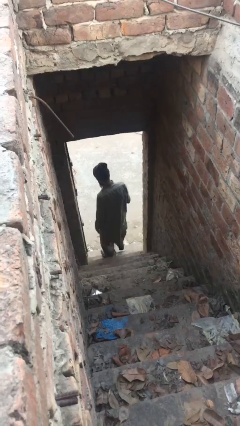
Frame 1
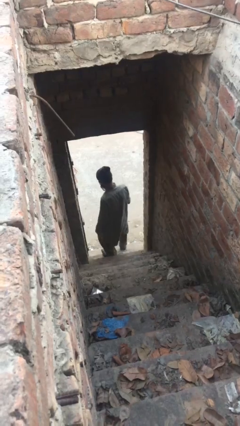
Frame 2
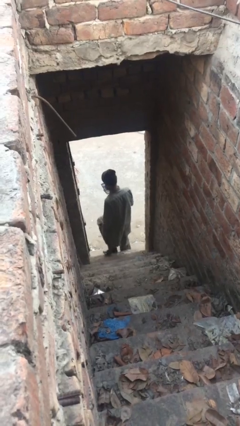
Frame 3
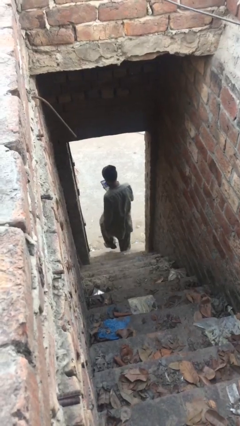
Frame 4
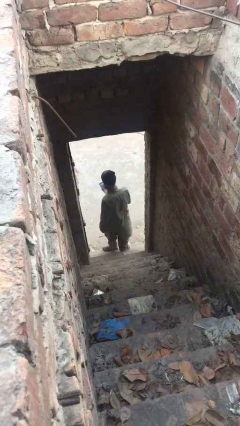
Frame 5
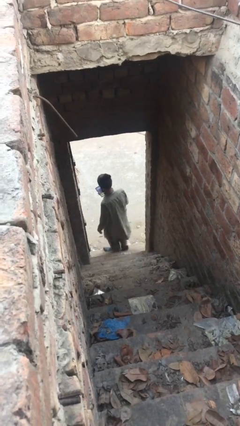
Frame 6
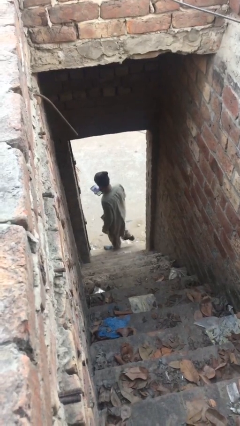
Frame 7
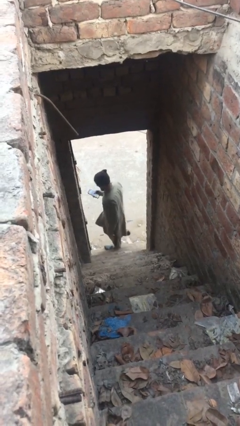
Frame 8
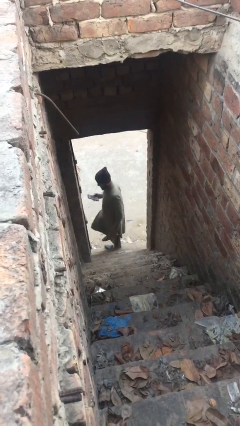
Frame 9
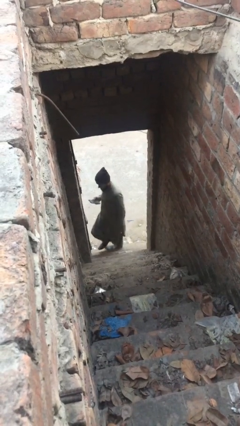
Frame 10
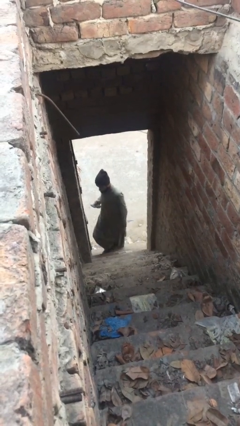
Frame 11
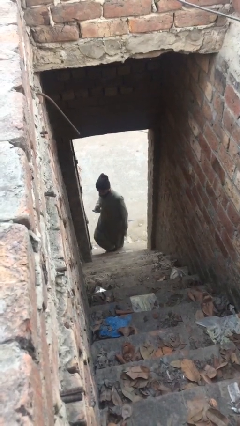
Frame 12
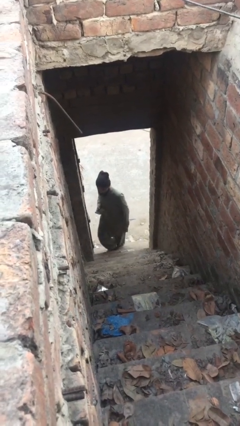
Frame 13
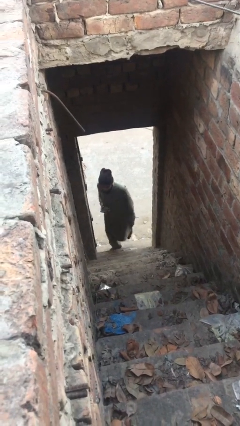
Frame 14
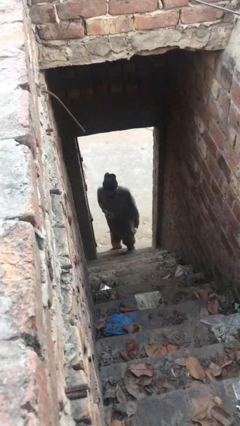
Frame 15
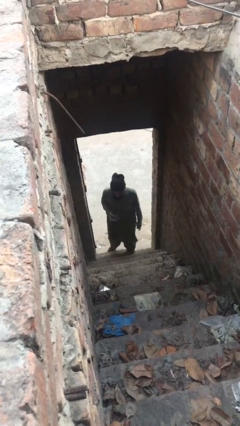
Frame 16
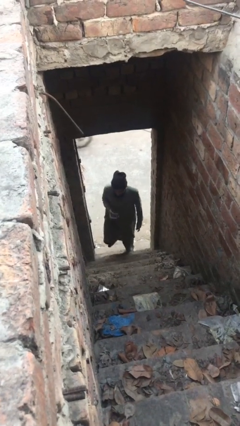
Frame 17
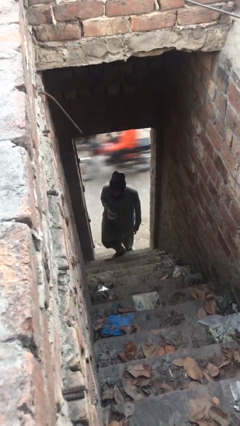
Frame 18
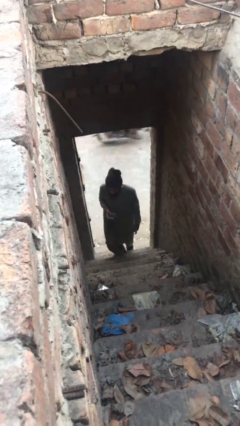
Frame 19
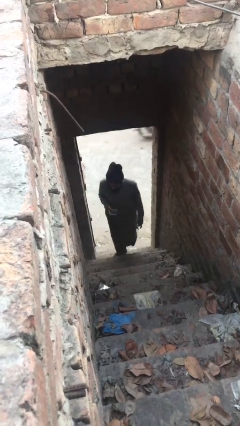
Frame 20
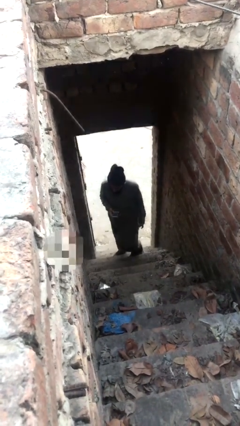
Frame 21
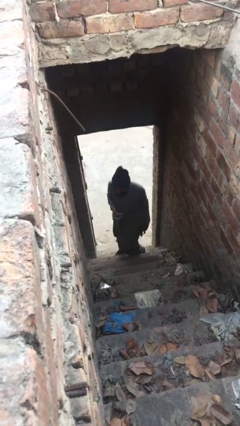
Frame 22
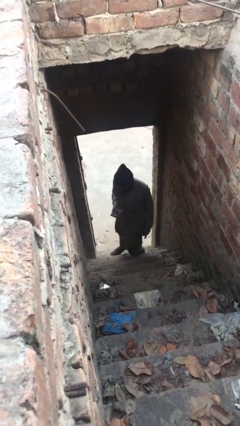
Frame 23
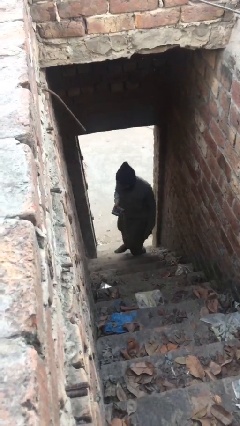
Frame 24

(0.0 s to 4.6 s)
person enters scene through structure

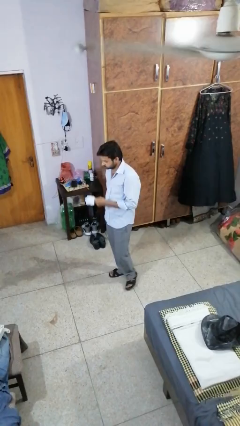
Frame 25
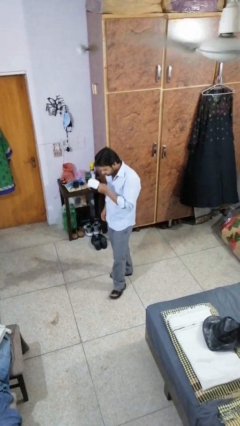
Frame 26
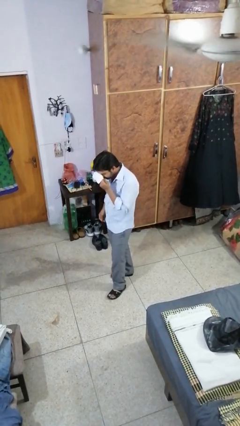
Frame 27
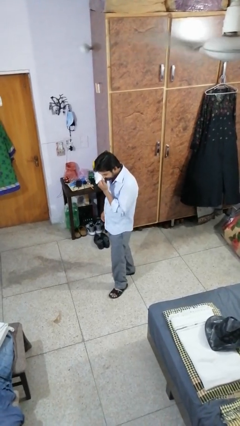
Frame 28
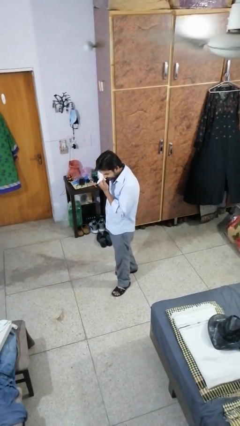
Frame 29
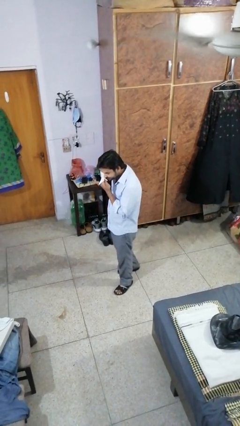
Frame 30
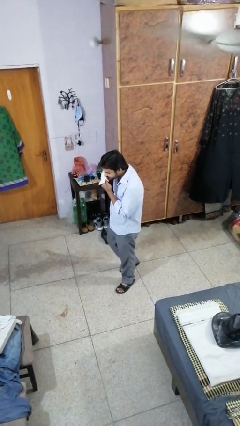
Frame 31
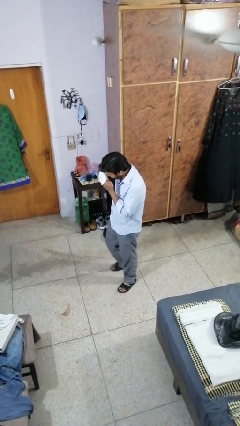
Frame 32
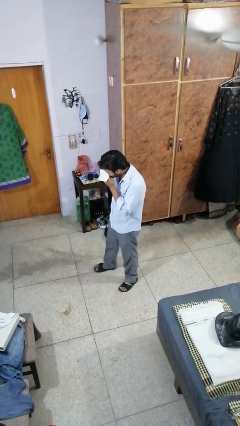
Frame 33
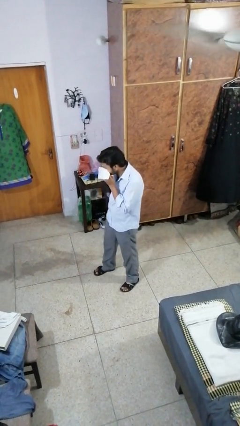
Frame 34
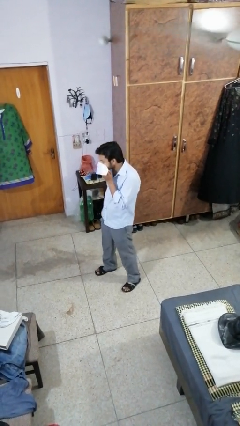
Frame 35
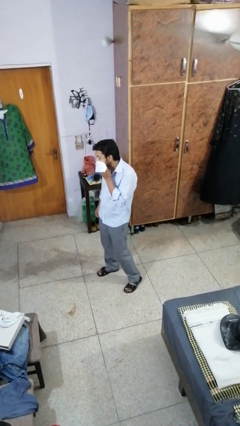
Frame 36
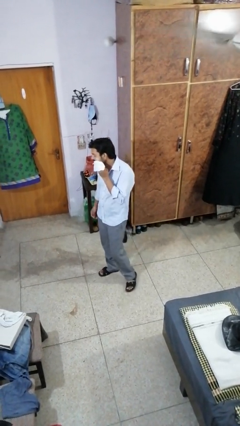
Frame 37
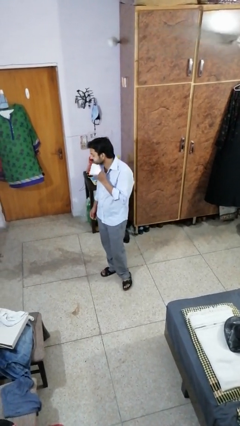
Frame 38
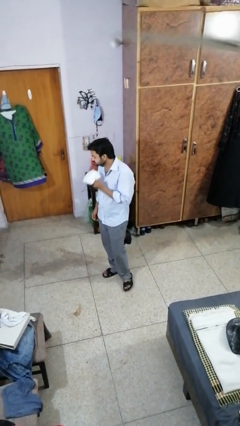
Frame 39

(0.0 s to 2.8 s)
person wipes mouth with napkin

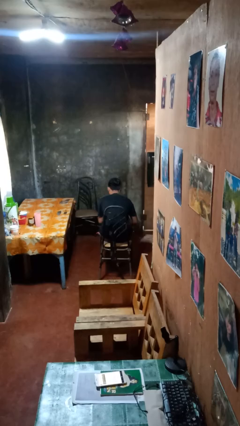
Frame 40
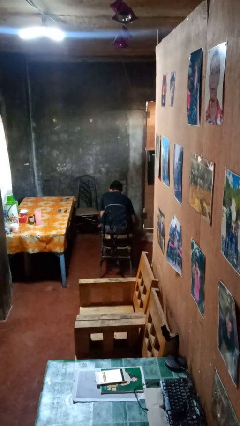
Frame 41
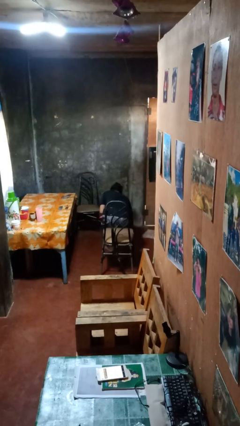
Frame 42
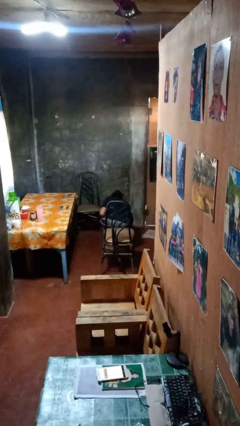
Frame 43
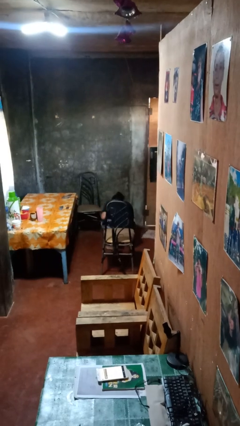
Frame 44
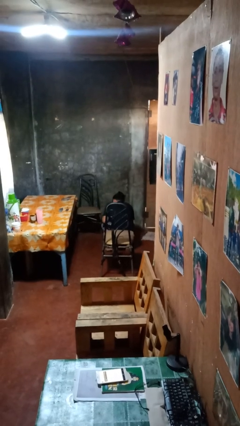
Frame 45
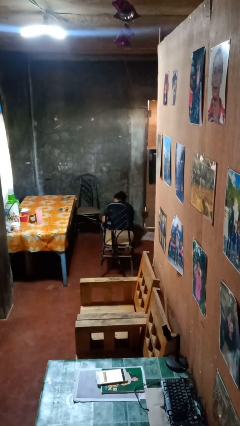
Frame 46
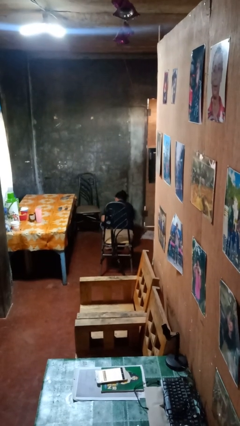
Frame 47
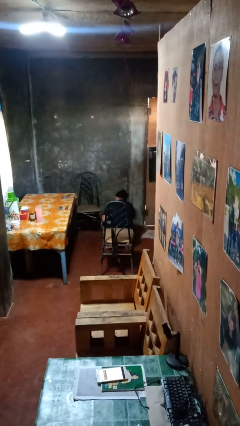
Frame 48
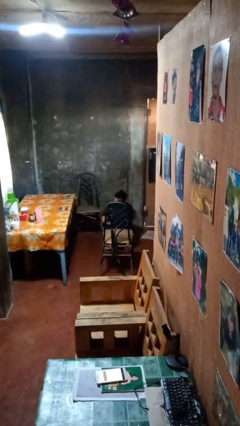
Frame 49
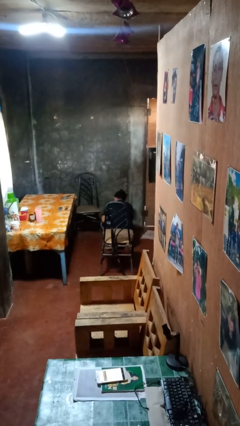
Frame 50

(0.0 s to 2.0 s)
person falls from chair

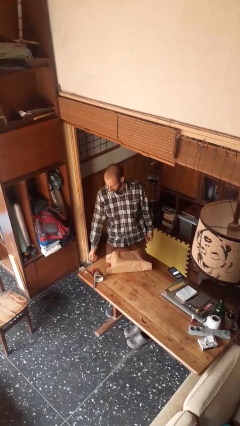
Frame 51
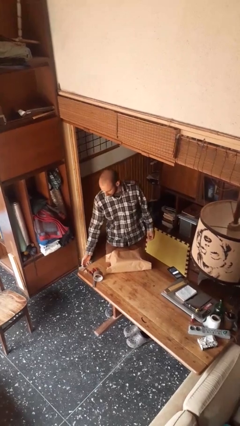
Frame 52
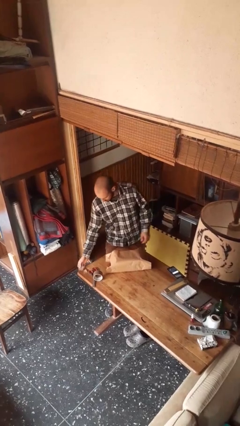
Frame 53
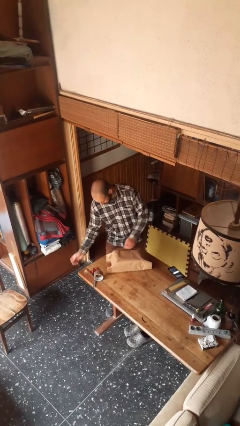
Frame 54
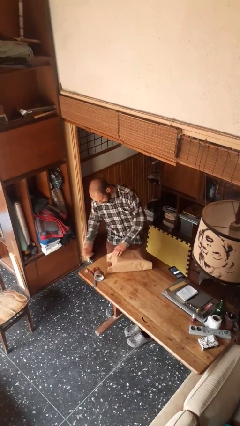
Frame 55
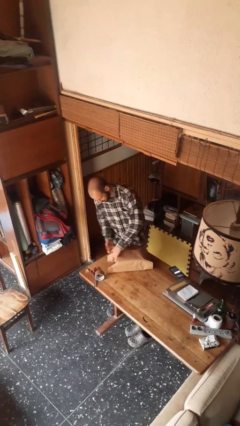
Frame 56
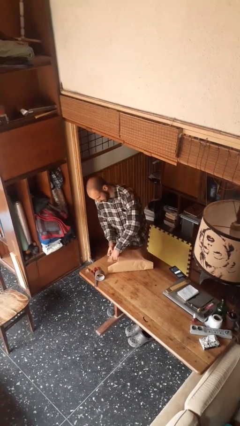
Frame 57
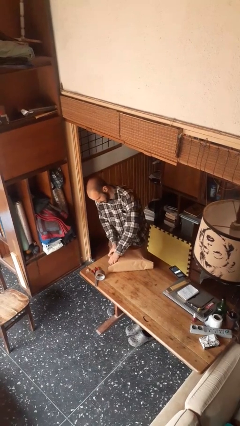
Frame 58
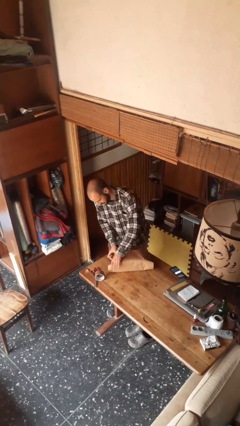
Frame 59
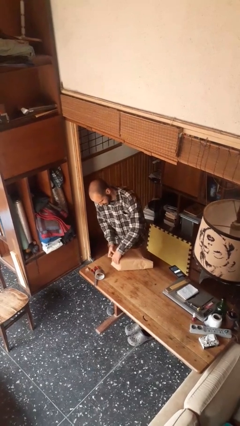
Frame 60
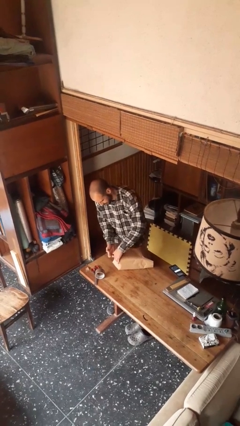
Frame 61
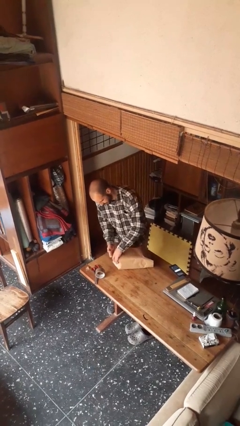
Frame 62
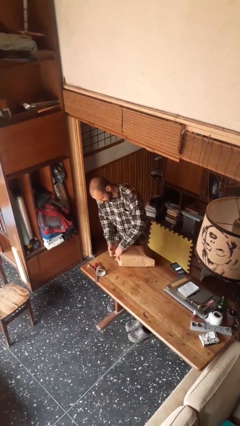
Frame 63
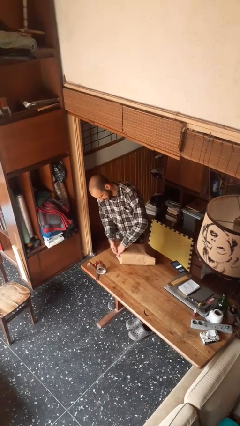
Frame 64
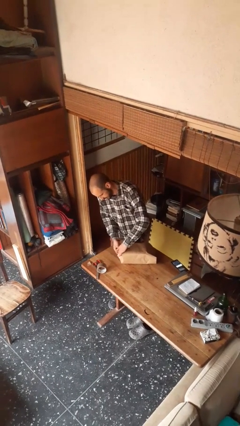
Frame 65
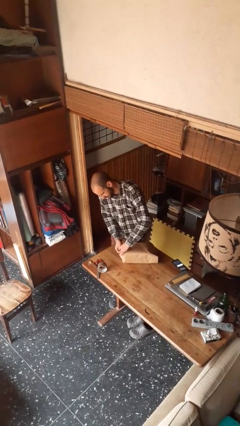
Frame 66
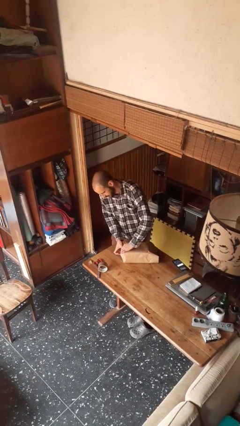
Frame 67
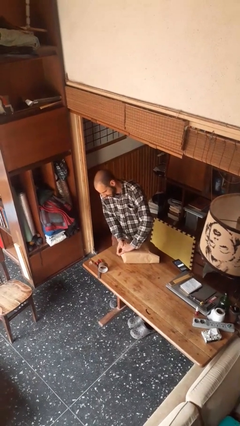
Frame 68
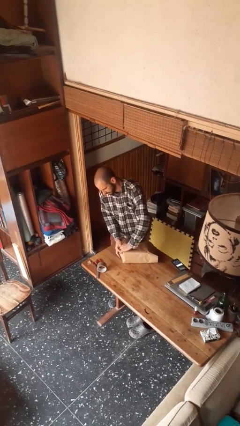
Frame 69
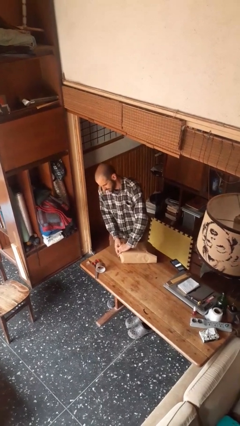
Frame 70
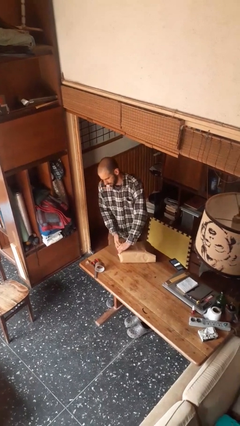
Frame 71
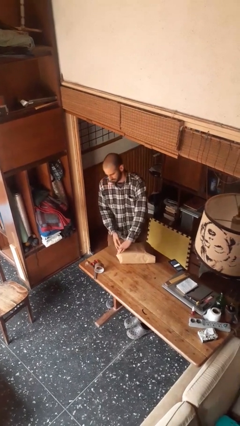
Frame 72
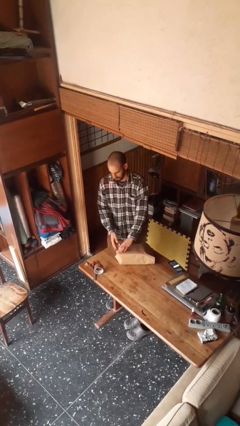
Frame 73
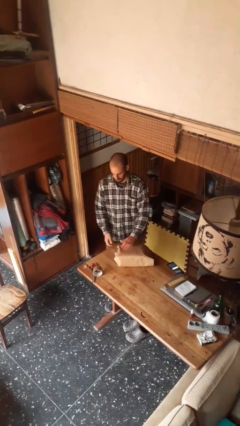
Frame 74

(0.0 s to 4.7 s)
person wraps box

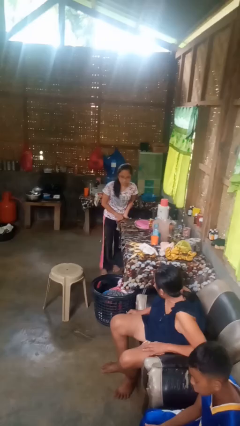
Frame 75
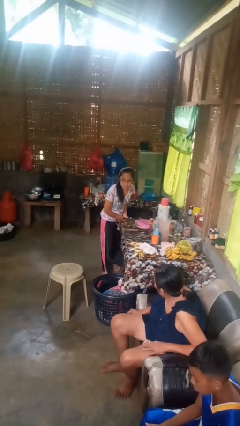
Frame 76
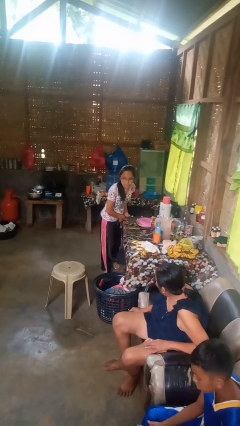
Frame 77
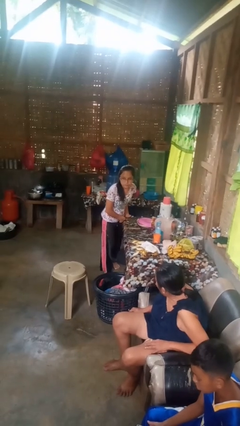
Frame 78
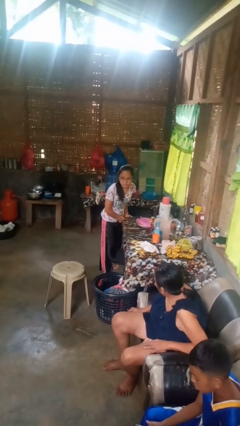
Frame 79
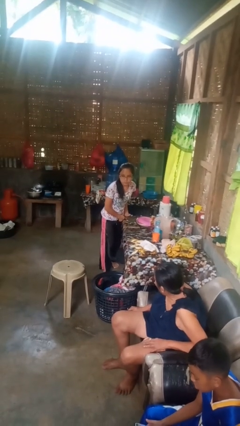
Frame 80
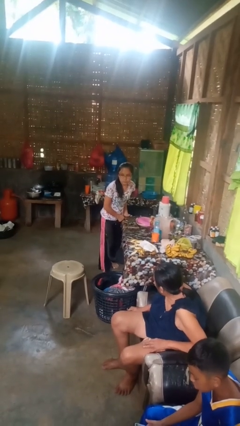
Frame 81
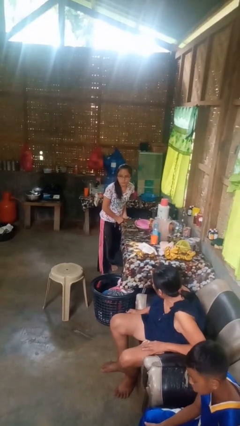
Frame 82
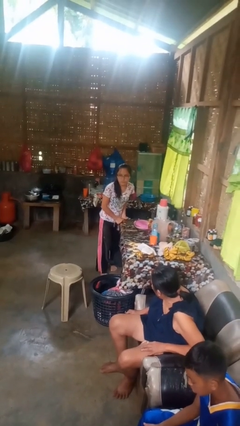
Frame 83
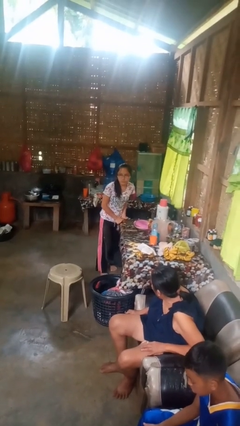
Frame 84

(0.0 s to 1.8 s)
person bumps into table

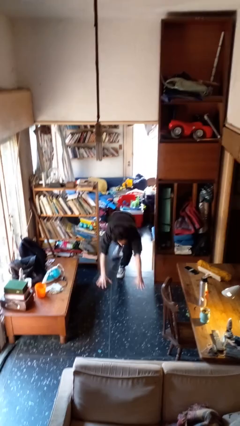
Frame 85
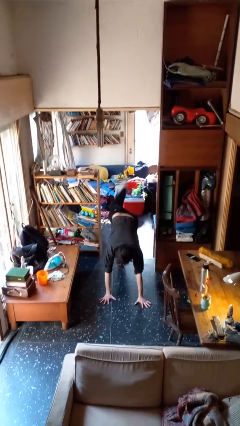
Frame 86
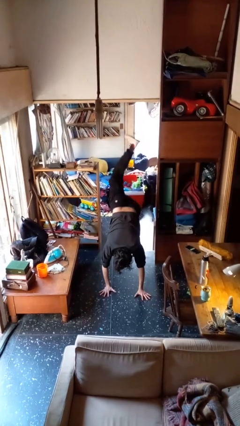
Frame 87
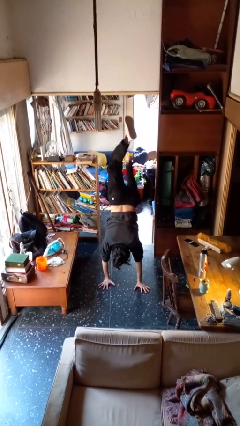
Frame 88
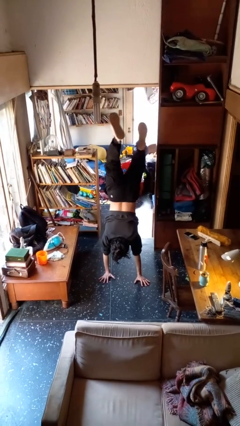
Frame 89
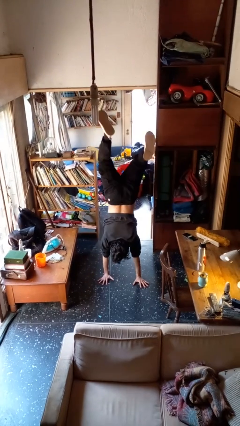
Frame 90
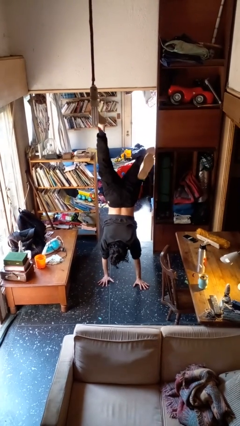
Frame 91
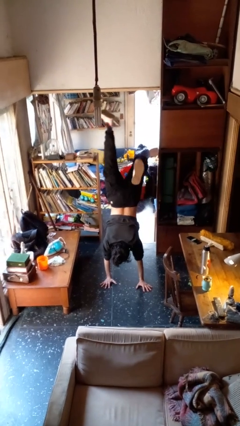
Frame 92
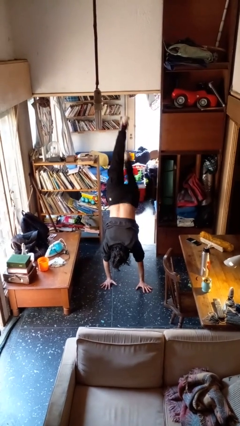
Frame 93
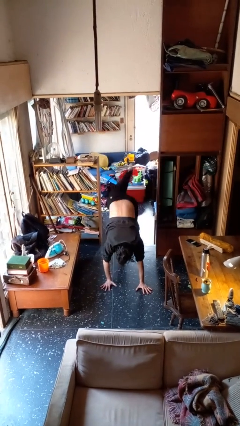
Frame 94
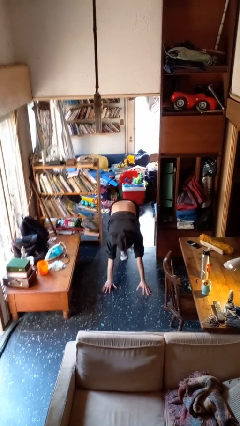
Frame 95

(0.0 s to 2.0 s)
person handstand
